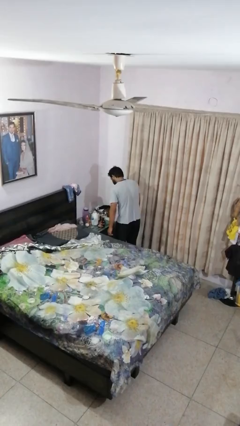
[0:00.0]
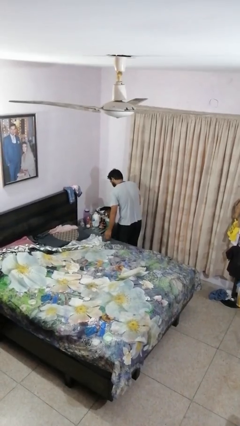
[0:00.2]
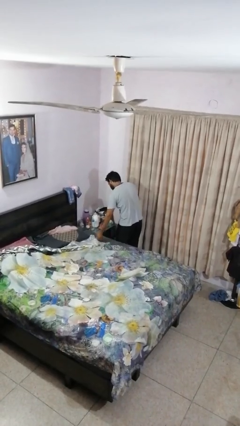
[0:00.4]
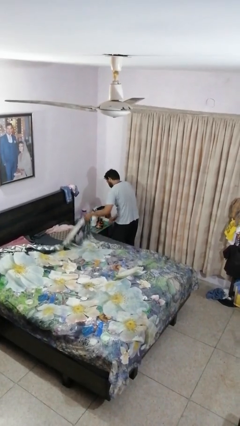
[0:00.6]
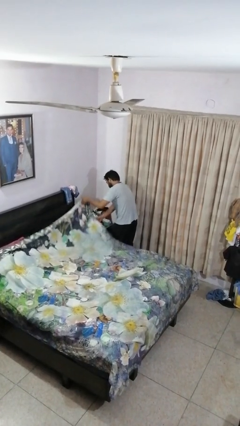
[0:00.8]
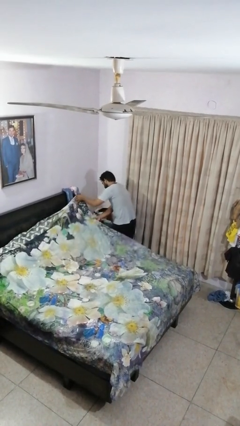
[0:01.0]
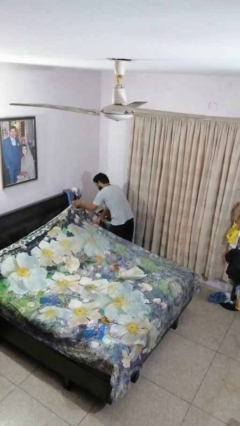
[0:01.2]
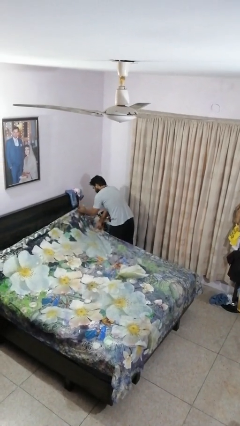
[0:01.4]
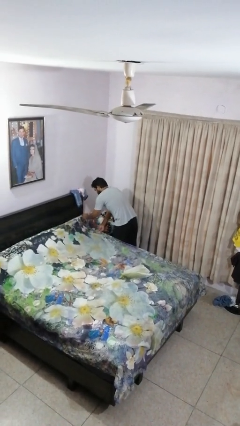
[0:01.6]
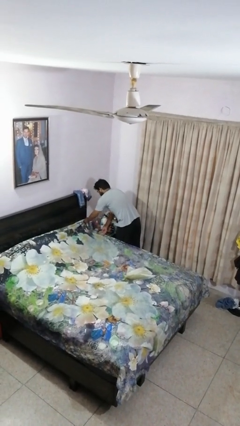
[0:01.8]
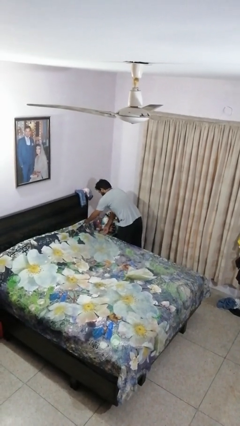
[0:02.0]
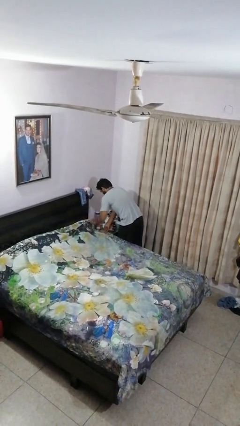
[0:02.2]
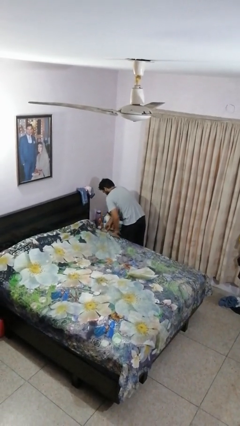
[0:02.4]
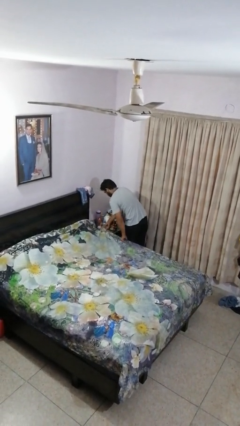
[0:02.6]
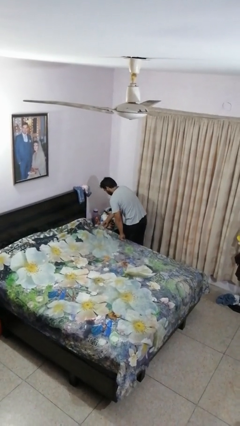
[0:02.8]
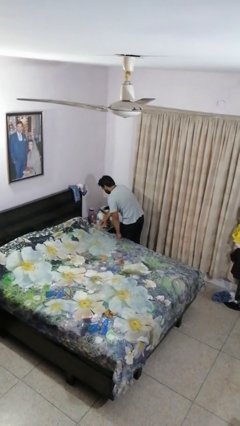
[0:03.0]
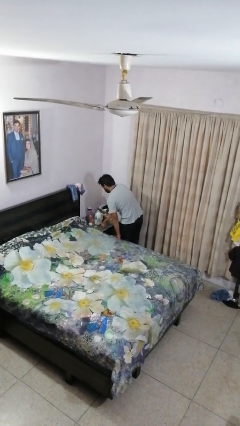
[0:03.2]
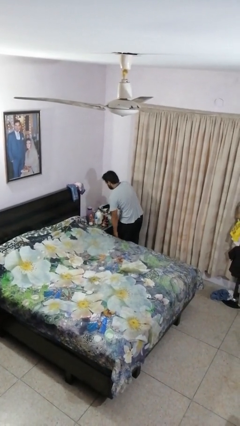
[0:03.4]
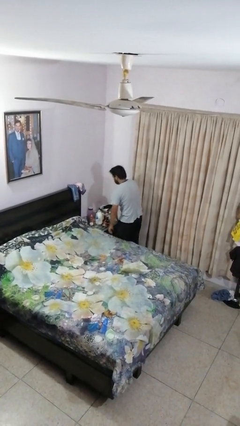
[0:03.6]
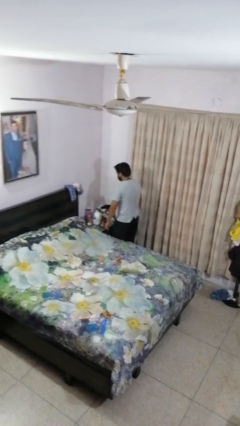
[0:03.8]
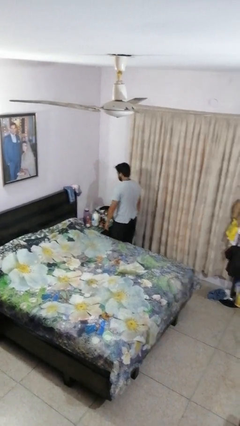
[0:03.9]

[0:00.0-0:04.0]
person makes bed

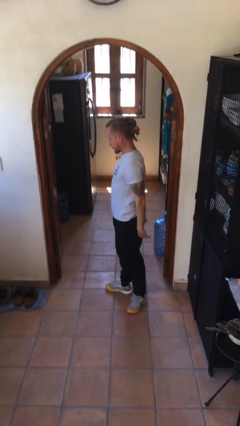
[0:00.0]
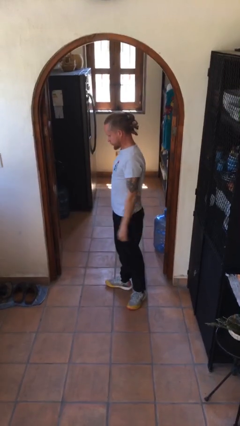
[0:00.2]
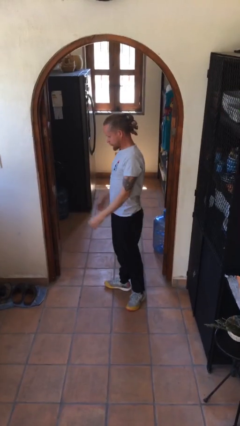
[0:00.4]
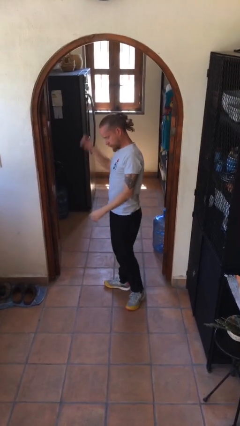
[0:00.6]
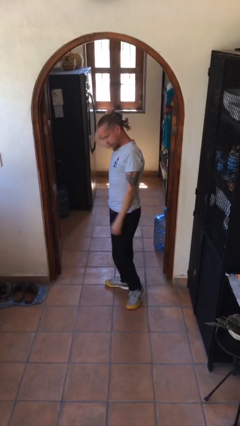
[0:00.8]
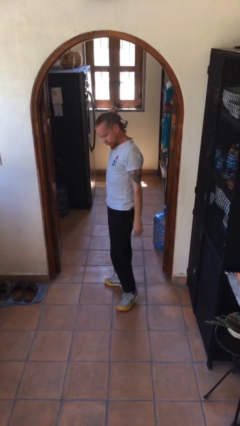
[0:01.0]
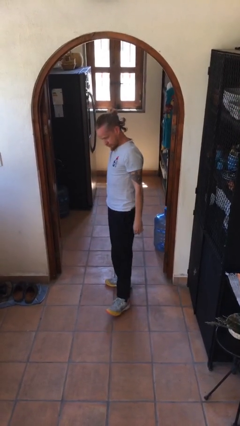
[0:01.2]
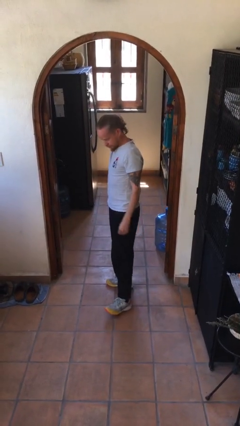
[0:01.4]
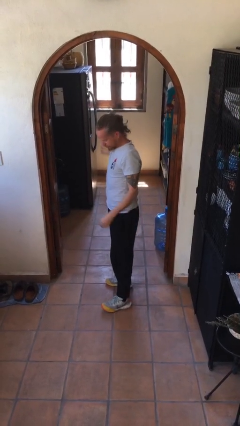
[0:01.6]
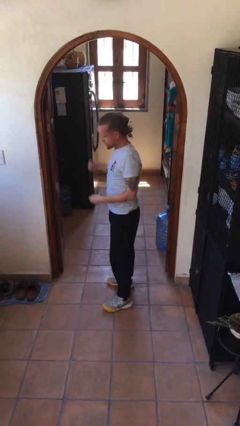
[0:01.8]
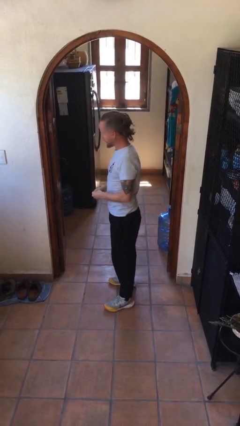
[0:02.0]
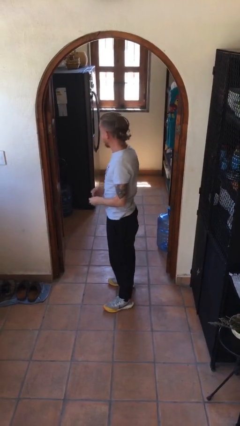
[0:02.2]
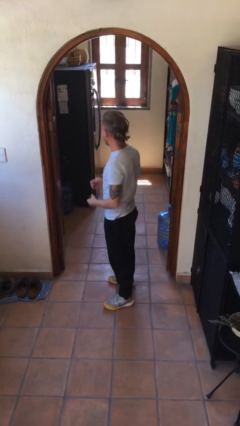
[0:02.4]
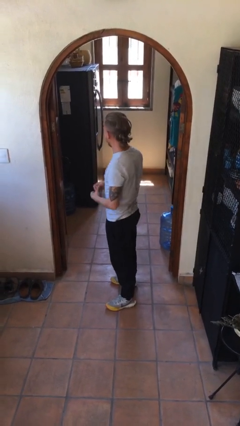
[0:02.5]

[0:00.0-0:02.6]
person takes off hairtie

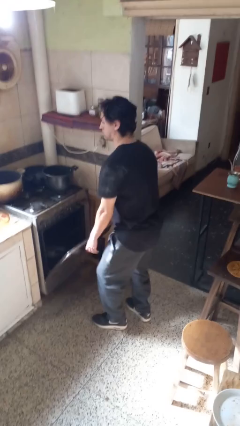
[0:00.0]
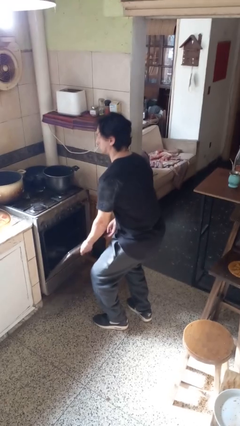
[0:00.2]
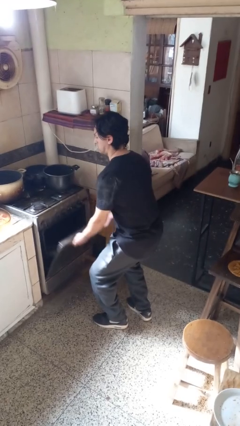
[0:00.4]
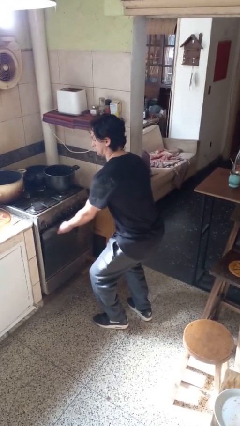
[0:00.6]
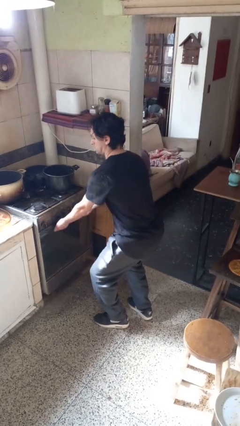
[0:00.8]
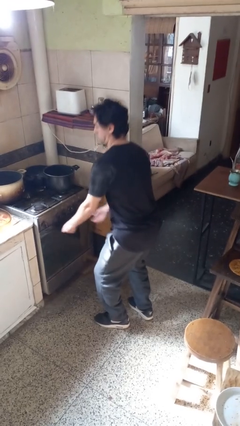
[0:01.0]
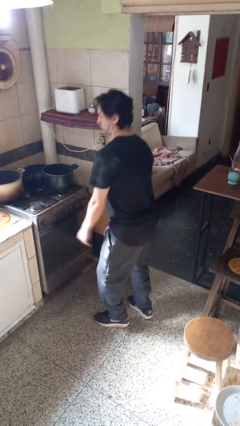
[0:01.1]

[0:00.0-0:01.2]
person closes oven door

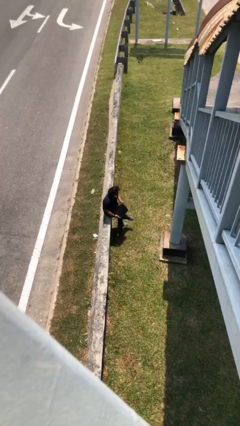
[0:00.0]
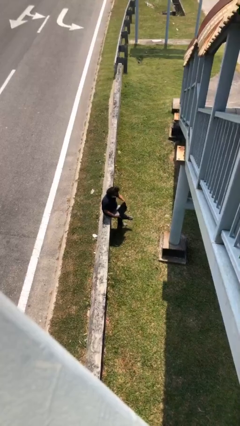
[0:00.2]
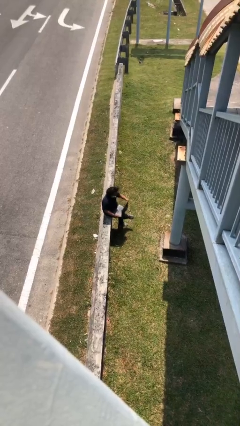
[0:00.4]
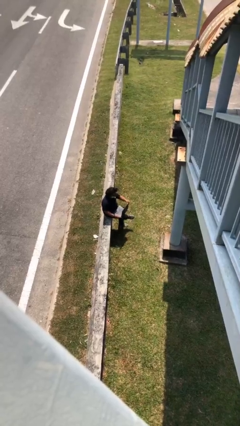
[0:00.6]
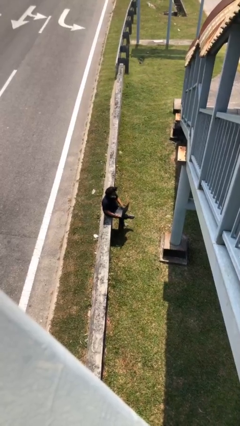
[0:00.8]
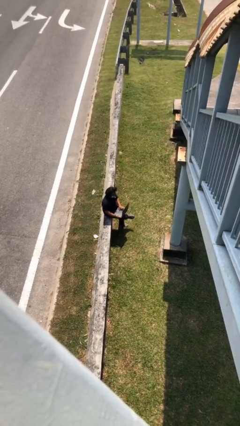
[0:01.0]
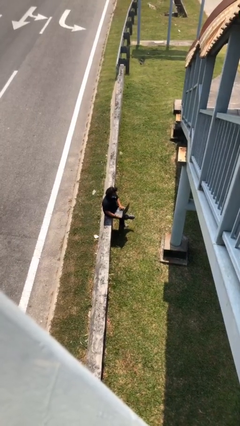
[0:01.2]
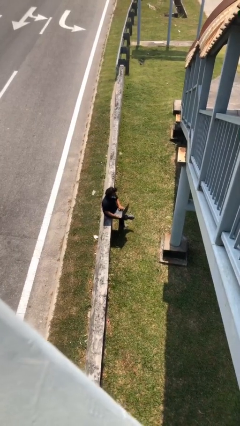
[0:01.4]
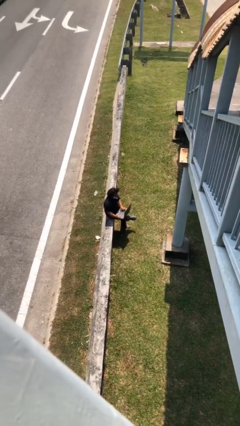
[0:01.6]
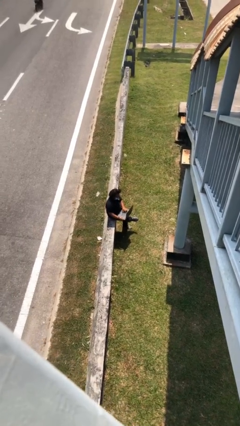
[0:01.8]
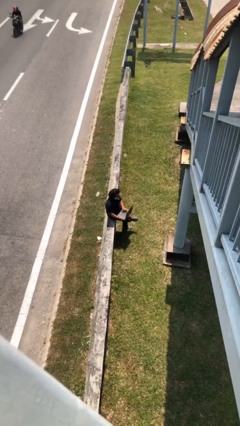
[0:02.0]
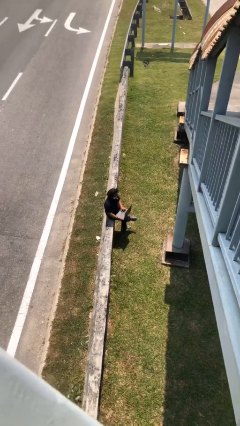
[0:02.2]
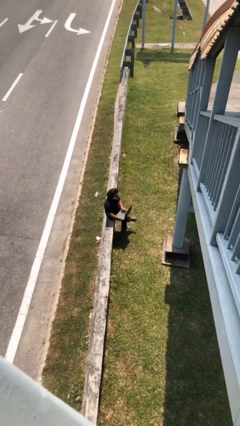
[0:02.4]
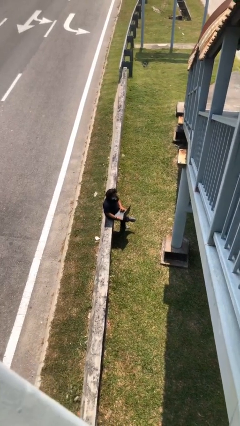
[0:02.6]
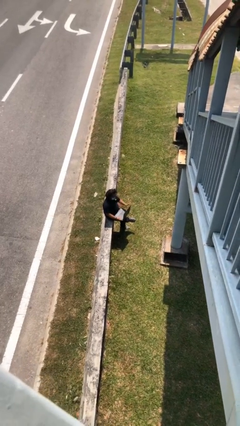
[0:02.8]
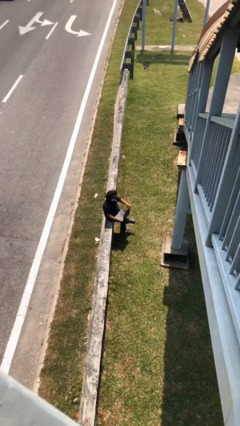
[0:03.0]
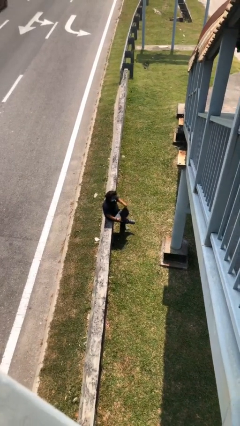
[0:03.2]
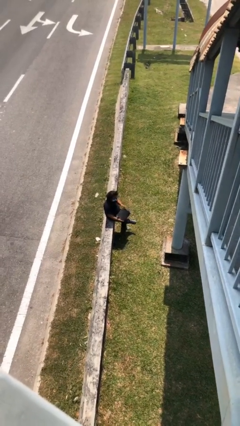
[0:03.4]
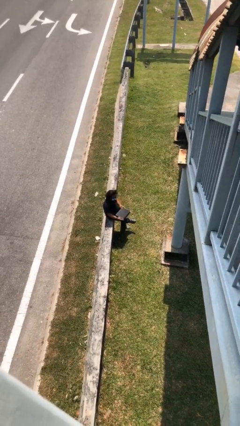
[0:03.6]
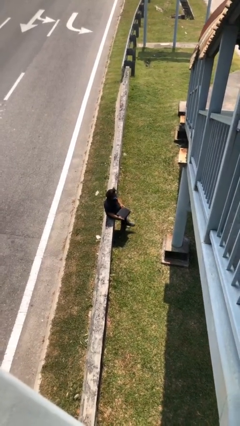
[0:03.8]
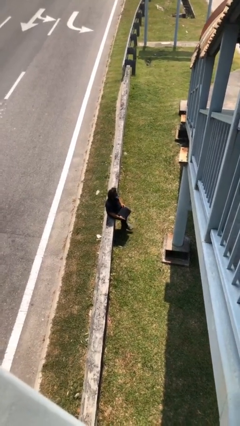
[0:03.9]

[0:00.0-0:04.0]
person interacts with laptop

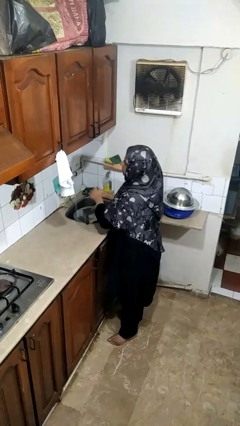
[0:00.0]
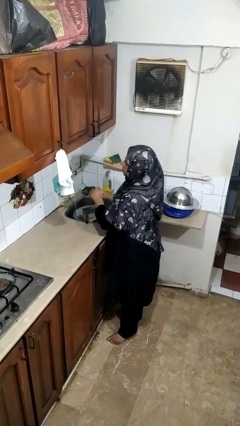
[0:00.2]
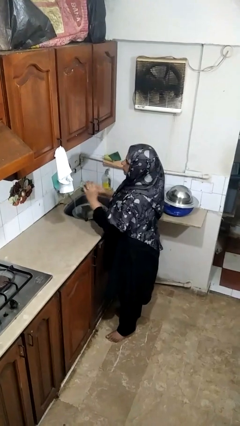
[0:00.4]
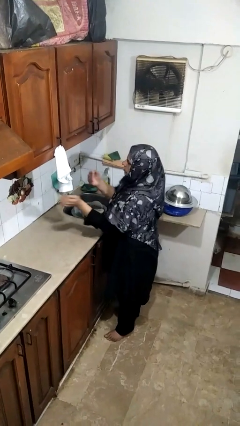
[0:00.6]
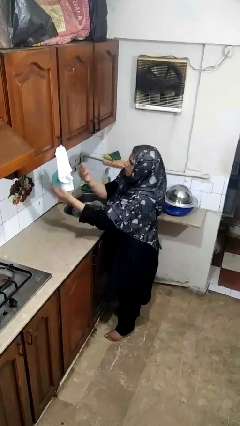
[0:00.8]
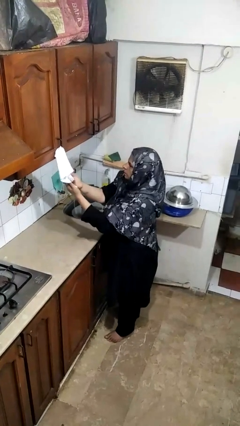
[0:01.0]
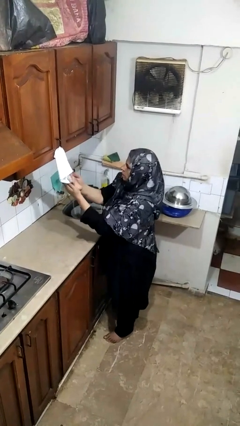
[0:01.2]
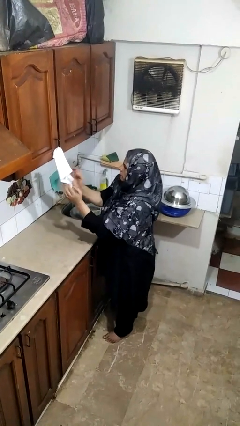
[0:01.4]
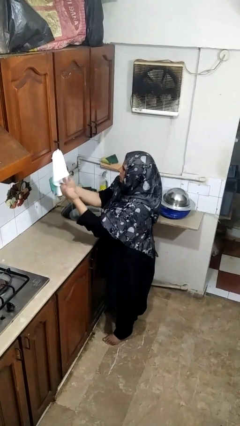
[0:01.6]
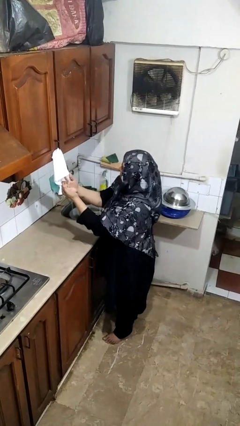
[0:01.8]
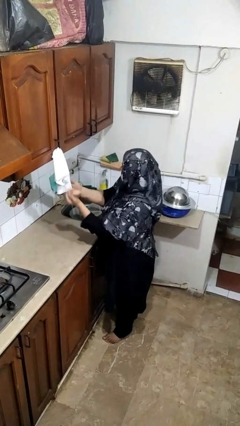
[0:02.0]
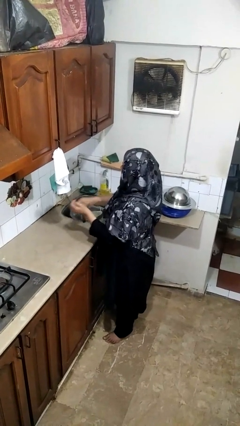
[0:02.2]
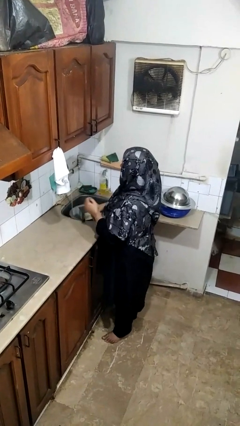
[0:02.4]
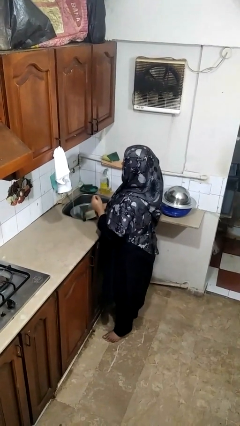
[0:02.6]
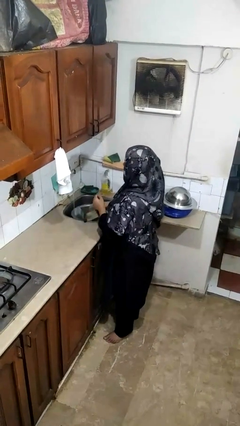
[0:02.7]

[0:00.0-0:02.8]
person dries hands with towel

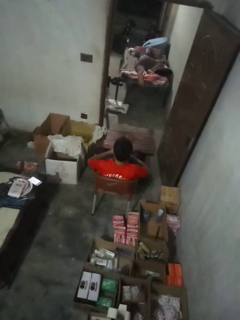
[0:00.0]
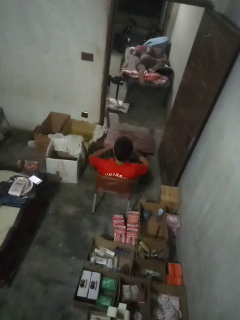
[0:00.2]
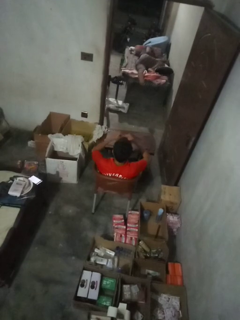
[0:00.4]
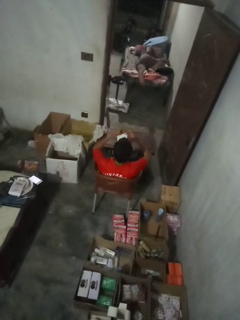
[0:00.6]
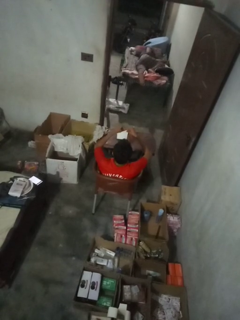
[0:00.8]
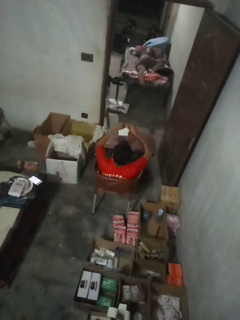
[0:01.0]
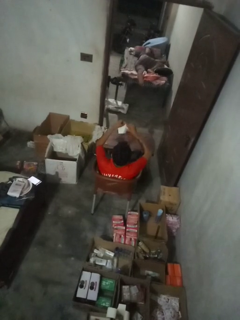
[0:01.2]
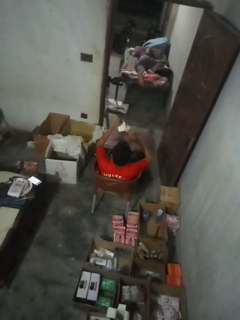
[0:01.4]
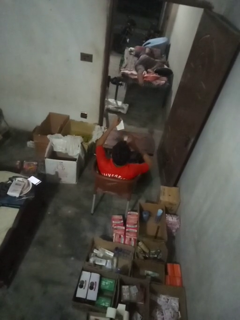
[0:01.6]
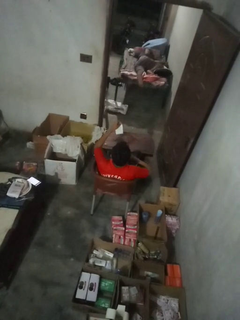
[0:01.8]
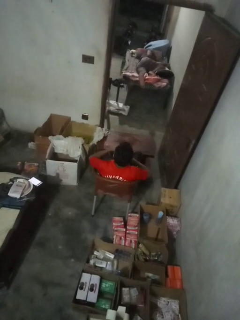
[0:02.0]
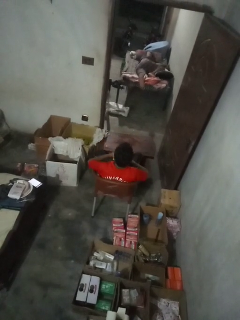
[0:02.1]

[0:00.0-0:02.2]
person tears paper

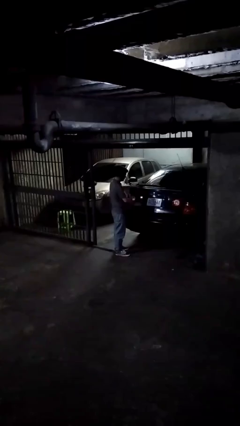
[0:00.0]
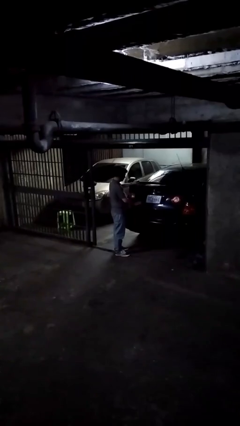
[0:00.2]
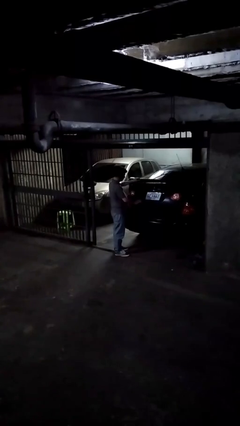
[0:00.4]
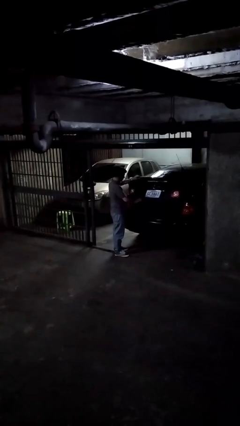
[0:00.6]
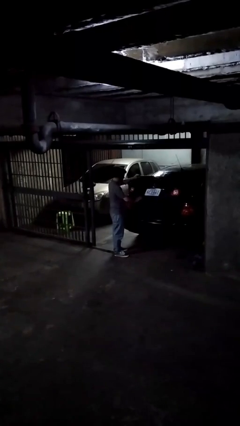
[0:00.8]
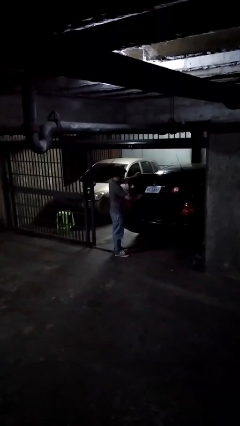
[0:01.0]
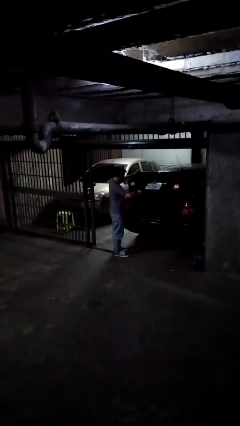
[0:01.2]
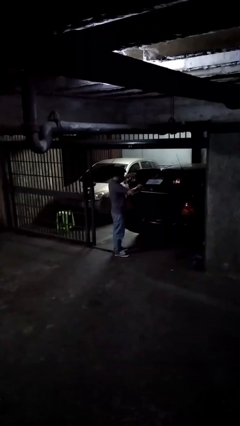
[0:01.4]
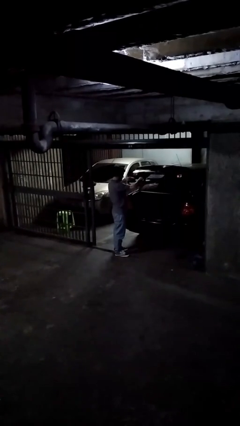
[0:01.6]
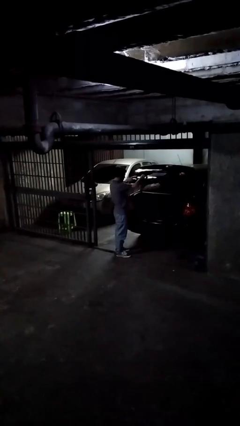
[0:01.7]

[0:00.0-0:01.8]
person opens car trunk
